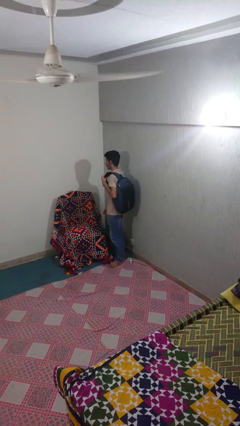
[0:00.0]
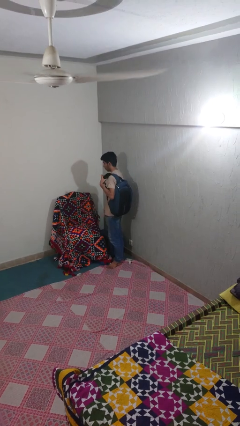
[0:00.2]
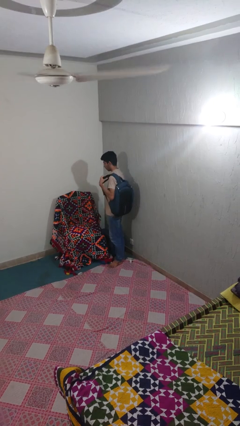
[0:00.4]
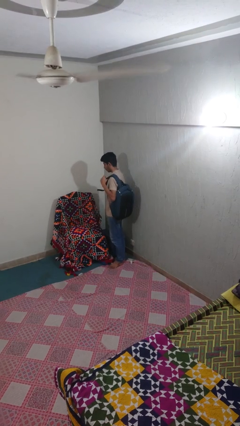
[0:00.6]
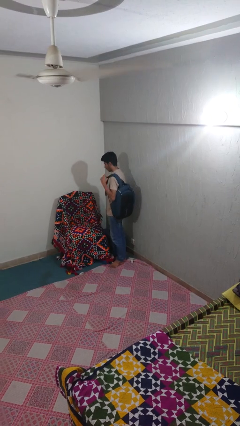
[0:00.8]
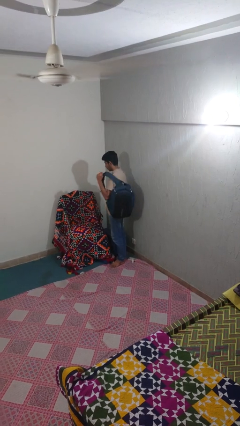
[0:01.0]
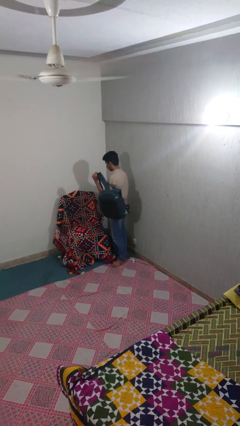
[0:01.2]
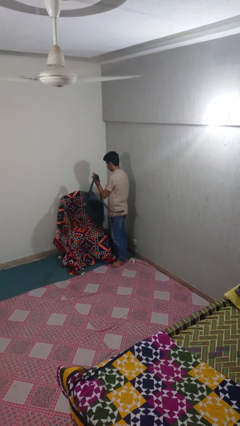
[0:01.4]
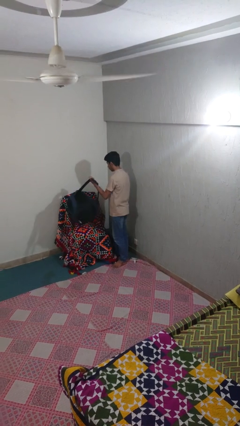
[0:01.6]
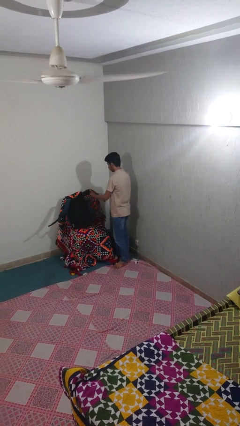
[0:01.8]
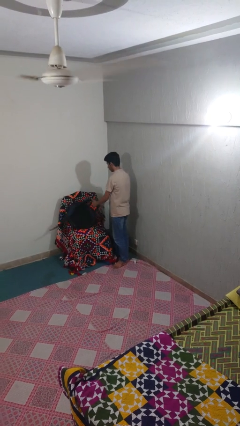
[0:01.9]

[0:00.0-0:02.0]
person puts down object on couch

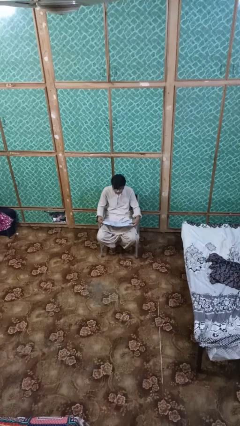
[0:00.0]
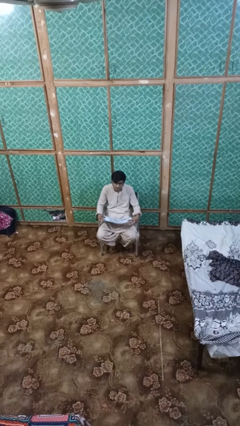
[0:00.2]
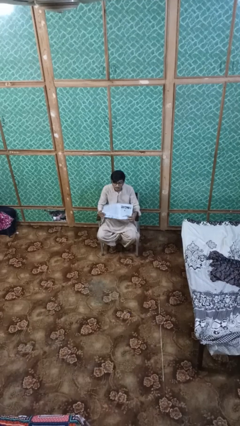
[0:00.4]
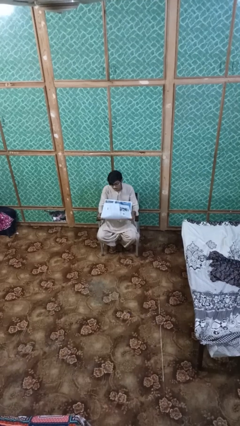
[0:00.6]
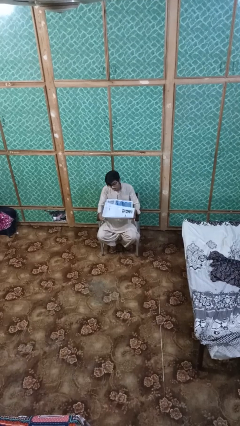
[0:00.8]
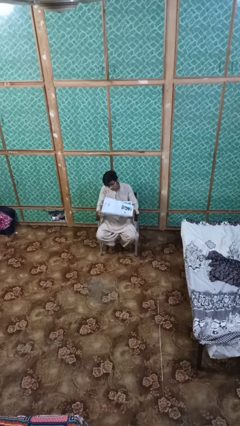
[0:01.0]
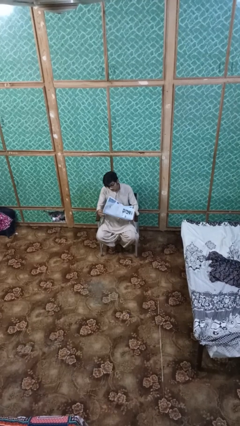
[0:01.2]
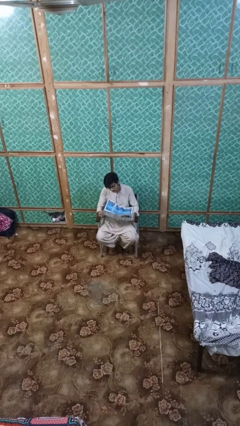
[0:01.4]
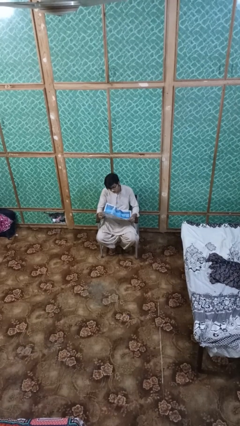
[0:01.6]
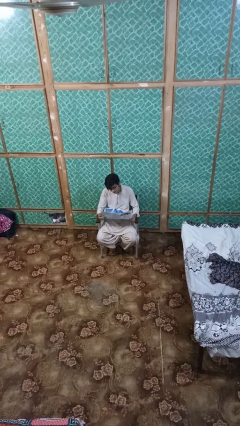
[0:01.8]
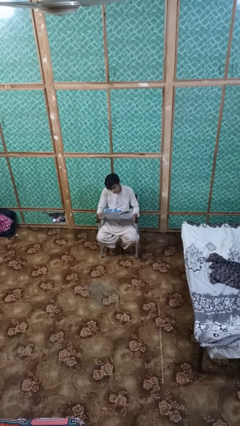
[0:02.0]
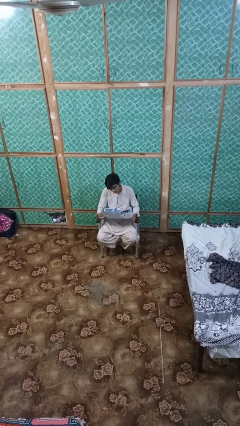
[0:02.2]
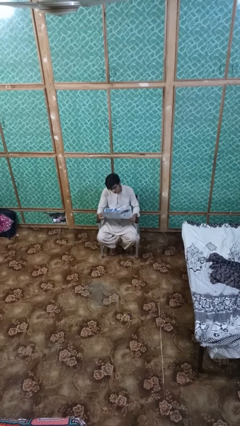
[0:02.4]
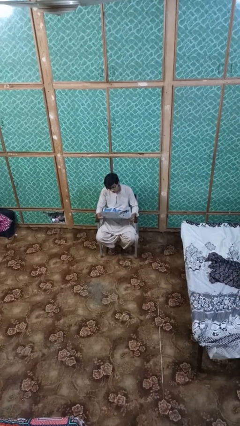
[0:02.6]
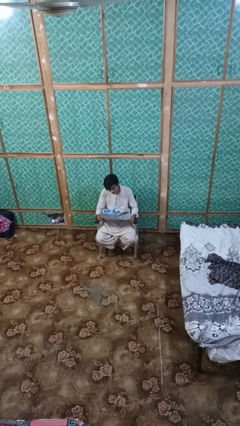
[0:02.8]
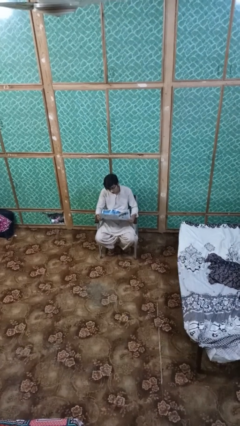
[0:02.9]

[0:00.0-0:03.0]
person reads newspaper

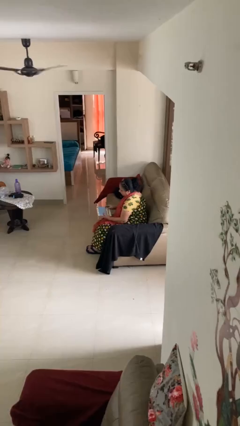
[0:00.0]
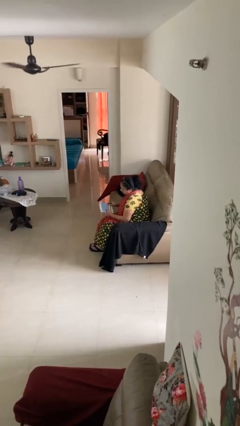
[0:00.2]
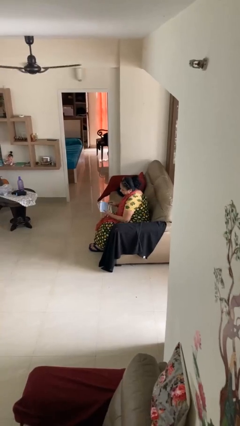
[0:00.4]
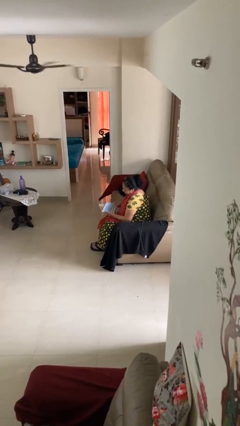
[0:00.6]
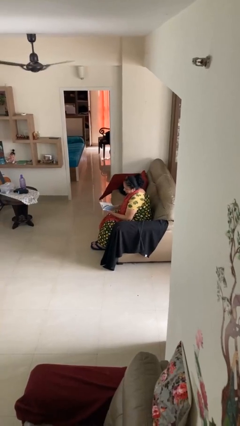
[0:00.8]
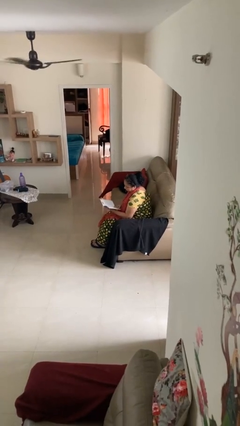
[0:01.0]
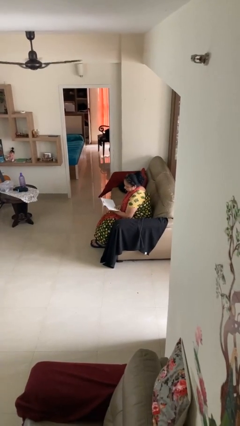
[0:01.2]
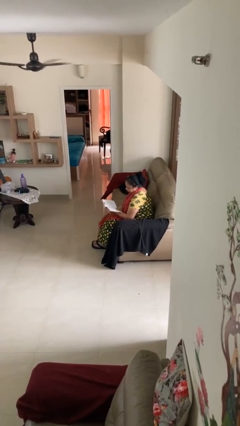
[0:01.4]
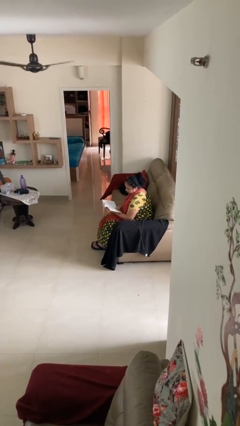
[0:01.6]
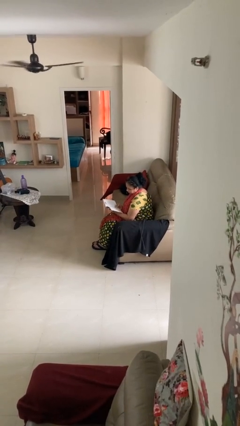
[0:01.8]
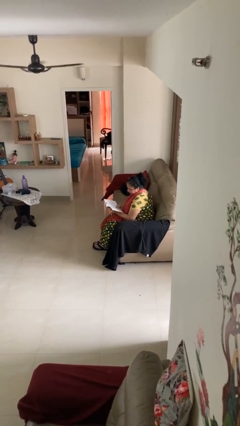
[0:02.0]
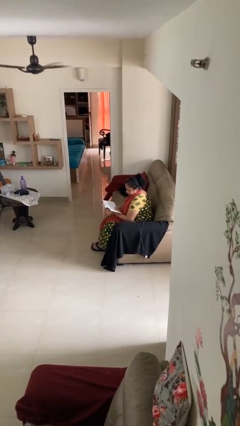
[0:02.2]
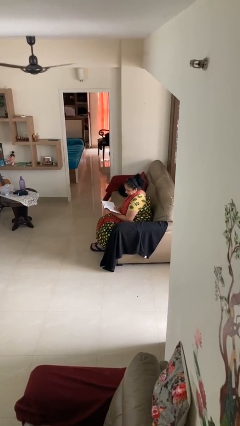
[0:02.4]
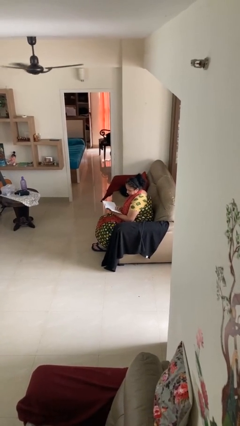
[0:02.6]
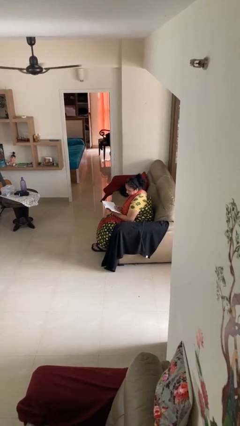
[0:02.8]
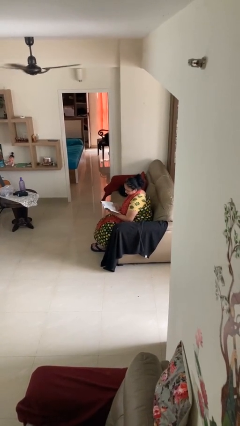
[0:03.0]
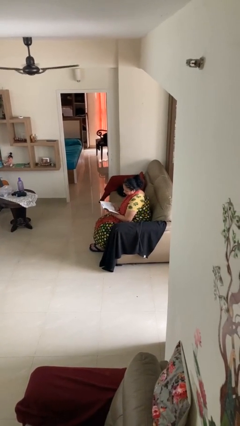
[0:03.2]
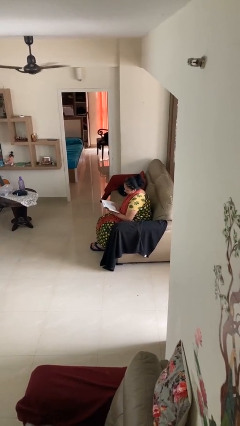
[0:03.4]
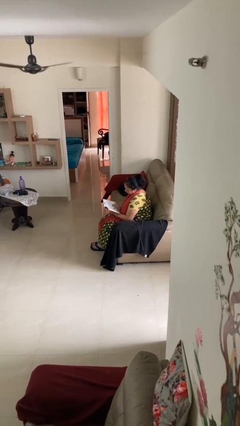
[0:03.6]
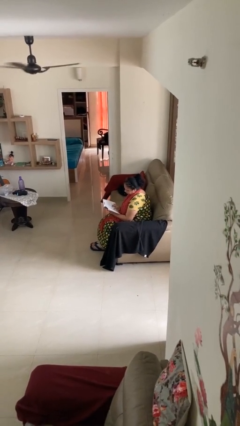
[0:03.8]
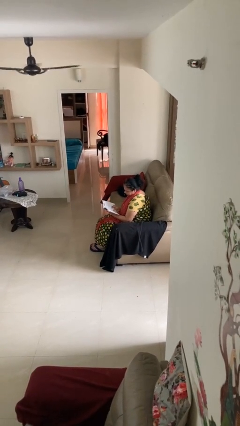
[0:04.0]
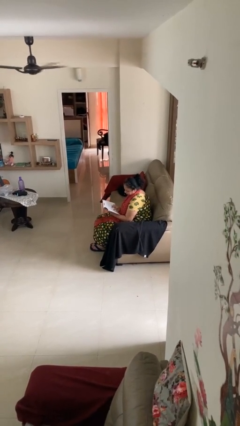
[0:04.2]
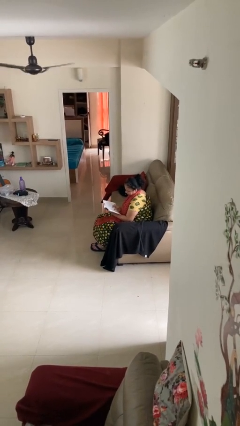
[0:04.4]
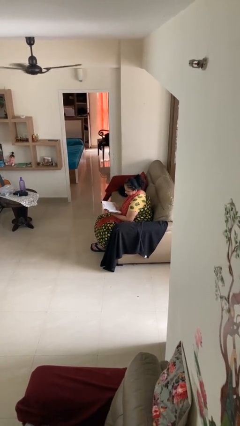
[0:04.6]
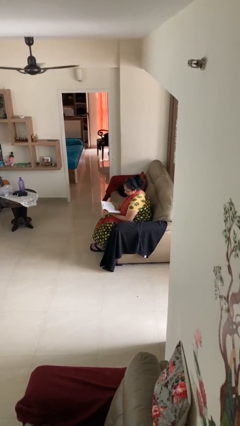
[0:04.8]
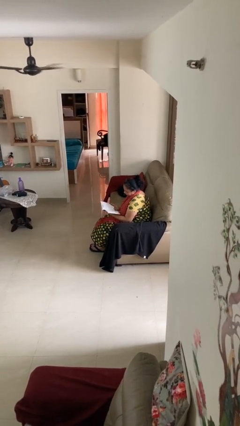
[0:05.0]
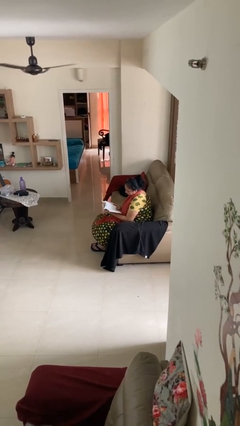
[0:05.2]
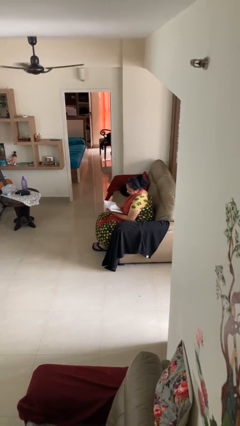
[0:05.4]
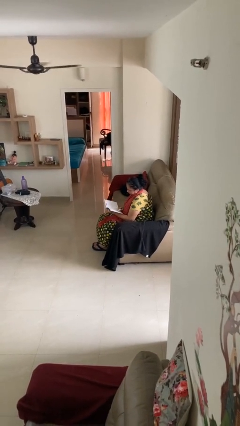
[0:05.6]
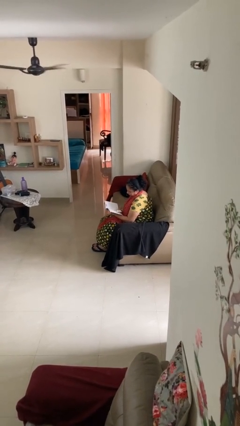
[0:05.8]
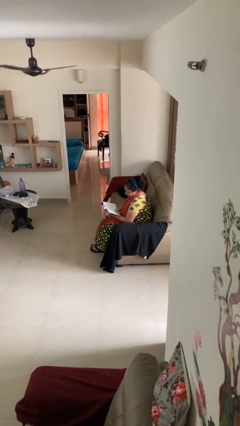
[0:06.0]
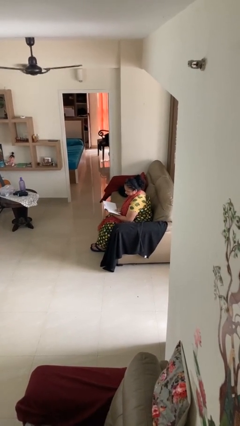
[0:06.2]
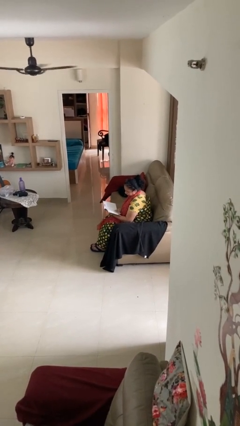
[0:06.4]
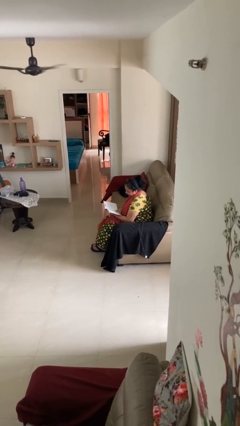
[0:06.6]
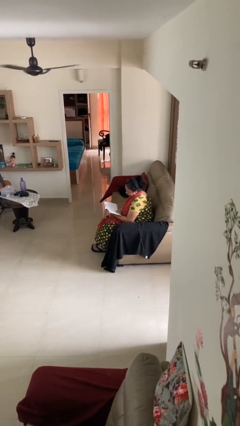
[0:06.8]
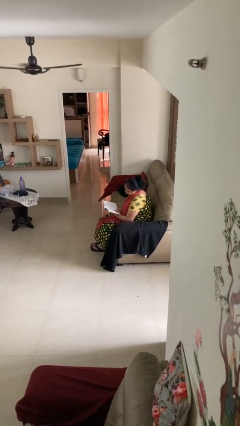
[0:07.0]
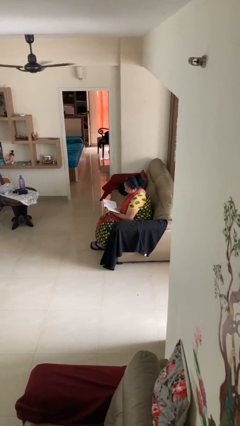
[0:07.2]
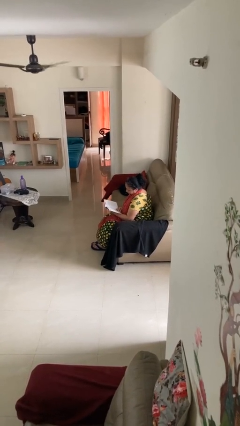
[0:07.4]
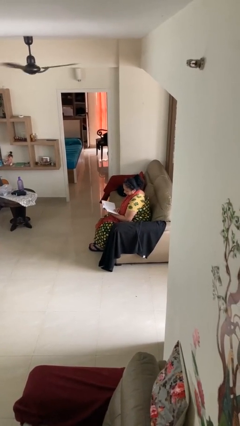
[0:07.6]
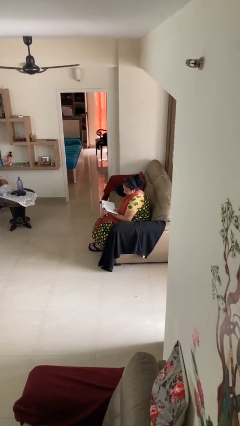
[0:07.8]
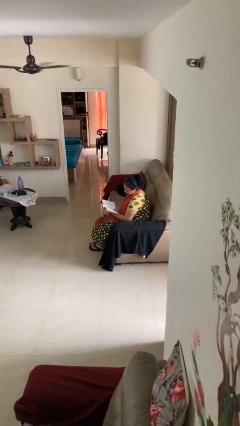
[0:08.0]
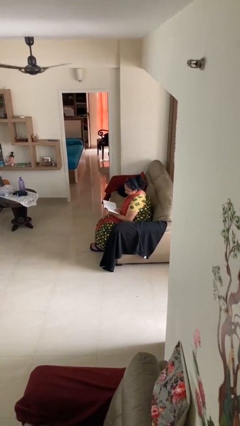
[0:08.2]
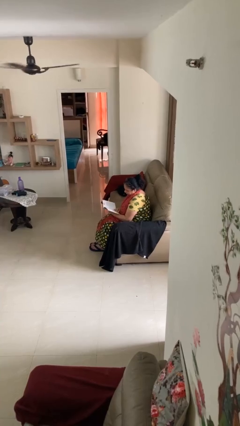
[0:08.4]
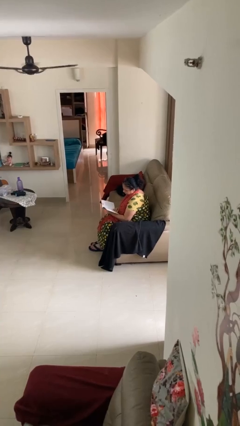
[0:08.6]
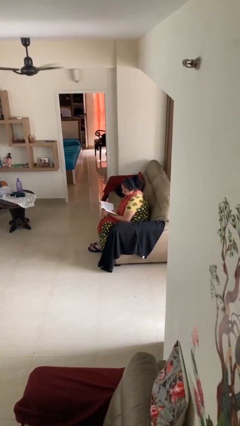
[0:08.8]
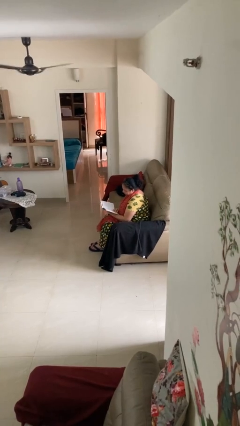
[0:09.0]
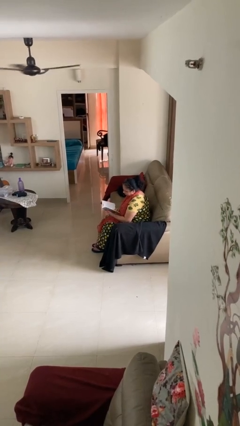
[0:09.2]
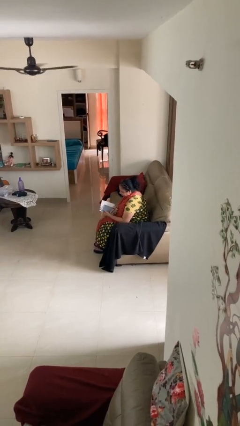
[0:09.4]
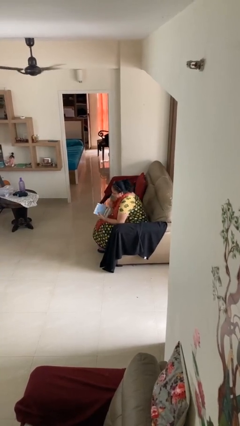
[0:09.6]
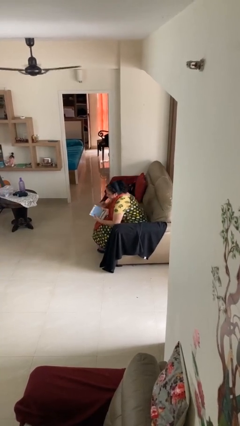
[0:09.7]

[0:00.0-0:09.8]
person reads document

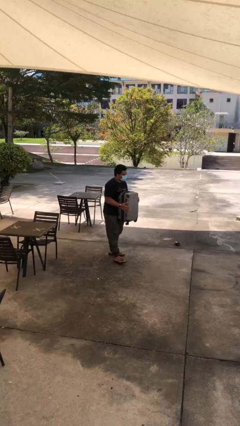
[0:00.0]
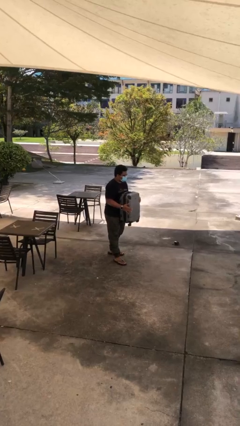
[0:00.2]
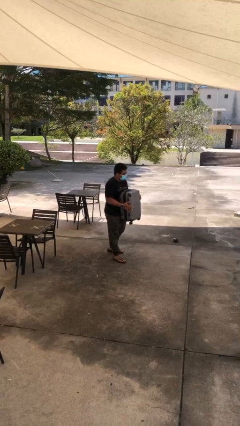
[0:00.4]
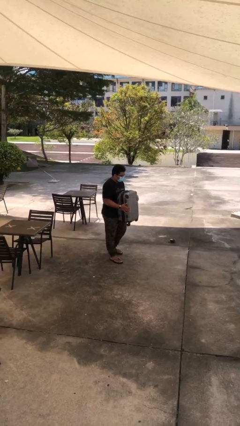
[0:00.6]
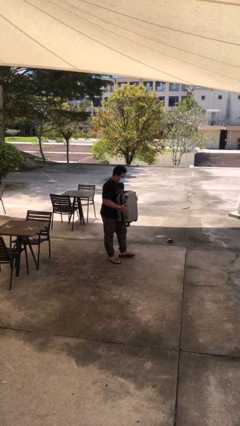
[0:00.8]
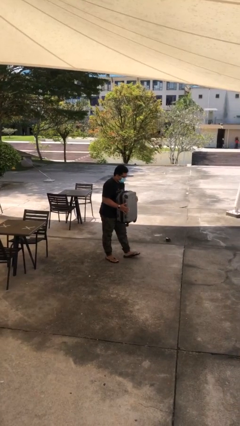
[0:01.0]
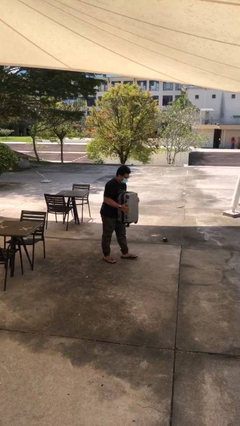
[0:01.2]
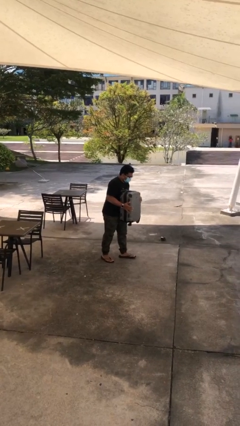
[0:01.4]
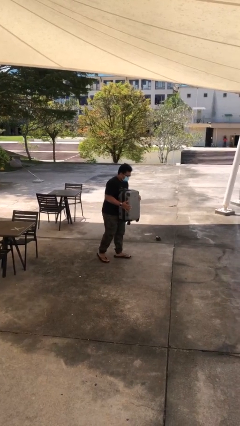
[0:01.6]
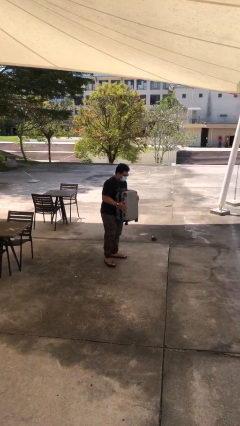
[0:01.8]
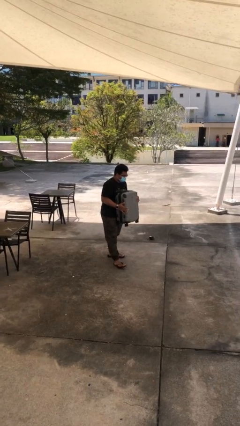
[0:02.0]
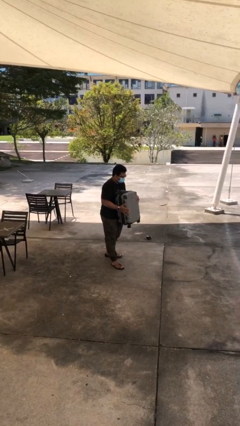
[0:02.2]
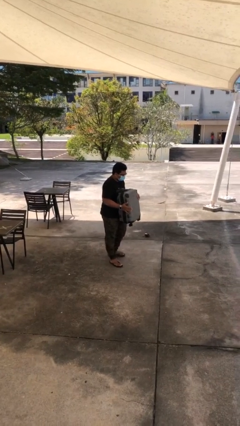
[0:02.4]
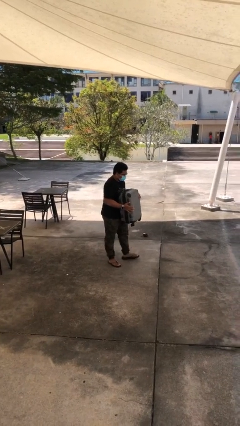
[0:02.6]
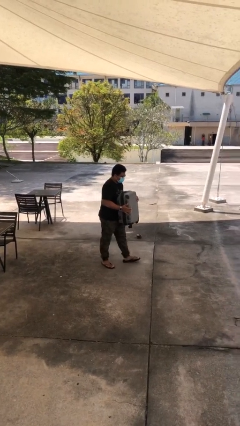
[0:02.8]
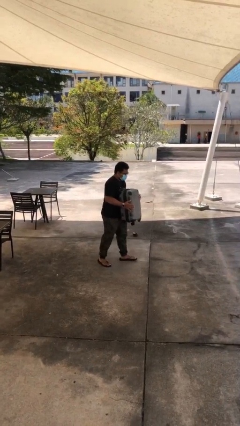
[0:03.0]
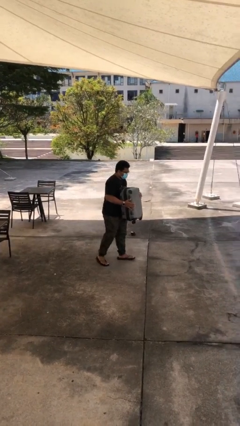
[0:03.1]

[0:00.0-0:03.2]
person carries heavy object
